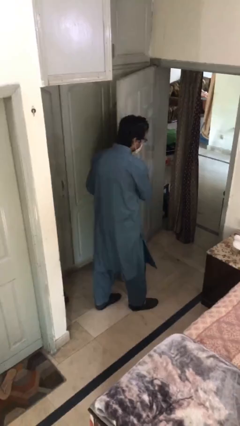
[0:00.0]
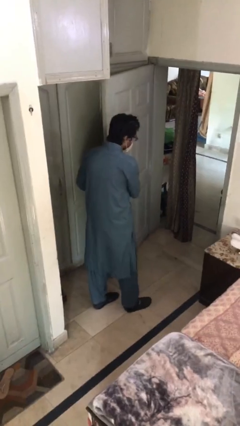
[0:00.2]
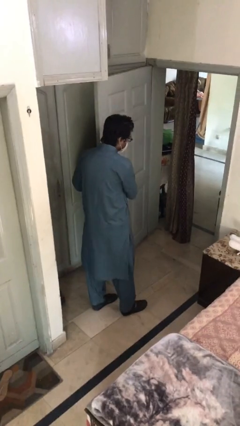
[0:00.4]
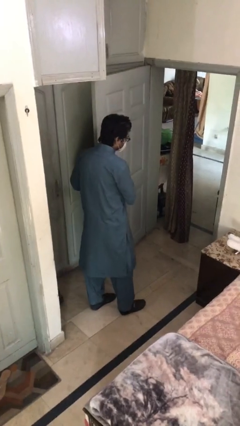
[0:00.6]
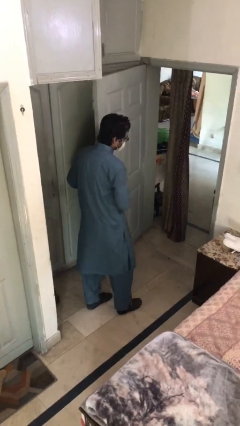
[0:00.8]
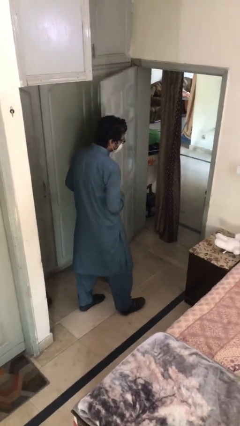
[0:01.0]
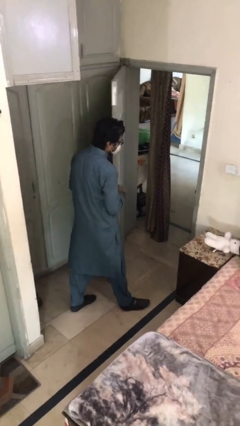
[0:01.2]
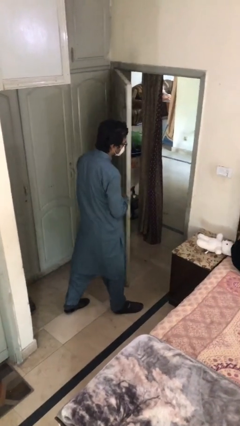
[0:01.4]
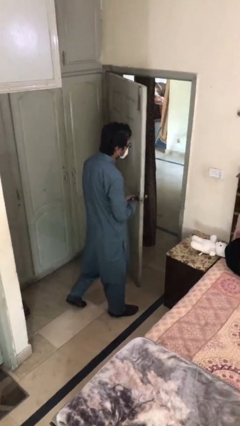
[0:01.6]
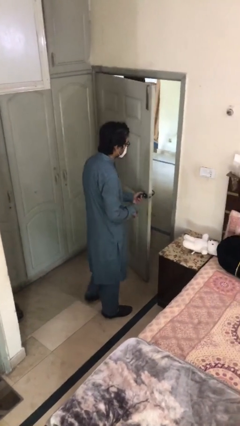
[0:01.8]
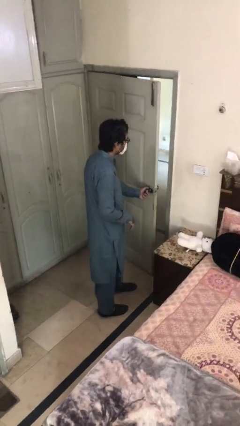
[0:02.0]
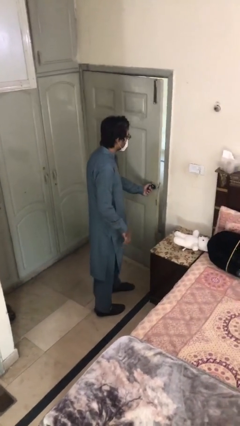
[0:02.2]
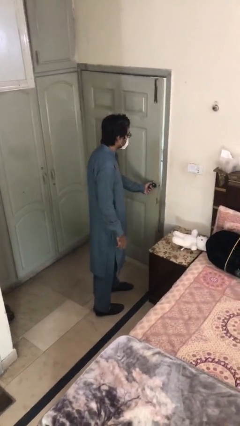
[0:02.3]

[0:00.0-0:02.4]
person closes facility door

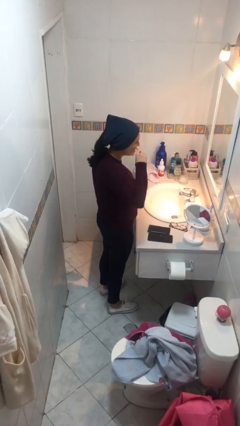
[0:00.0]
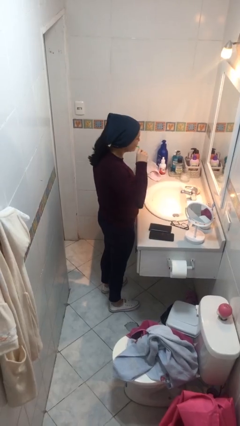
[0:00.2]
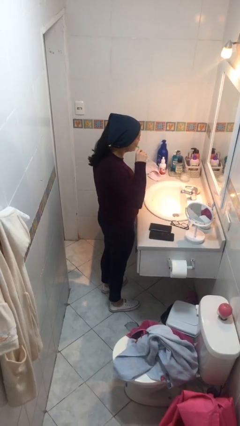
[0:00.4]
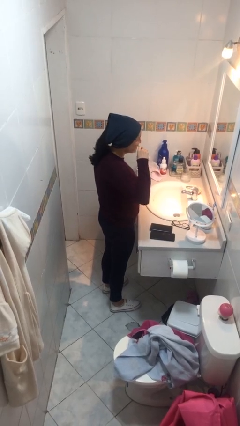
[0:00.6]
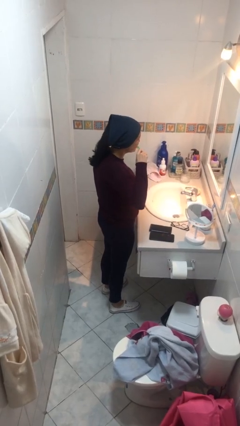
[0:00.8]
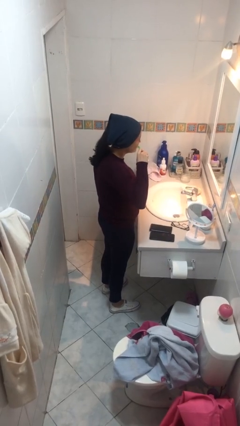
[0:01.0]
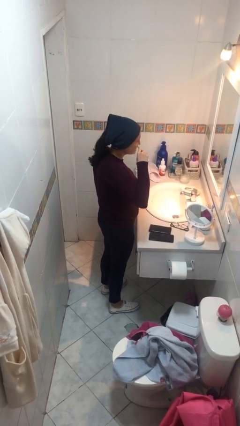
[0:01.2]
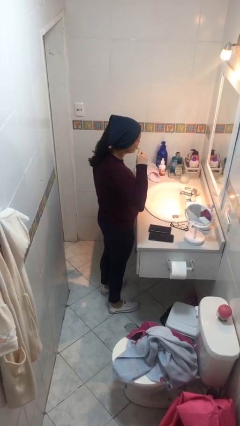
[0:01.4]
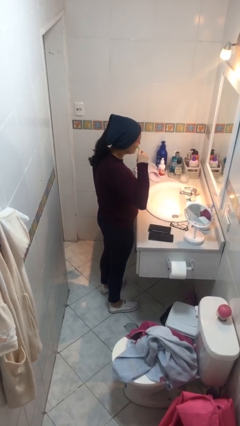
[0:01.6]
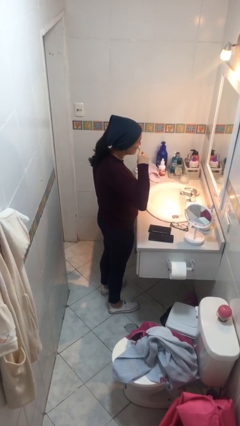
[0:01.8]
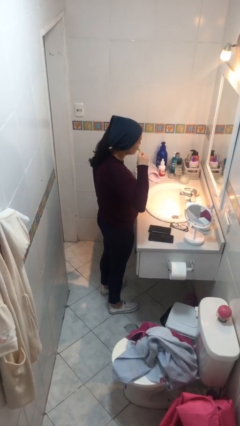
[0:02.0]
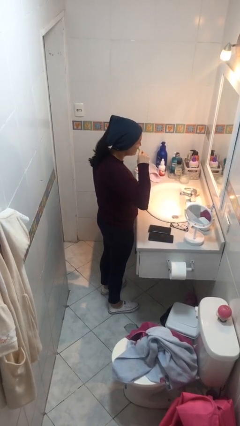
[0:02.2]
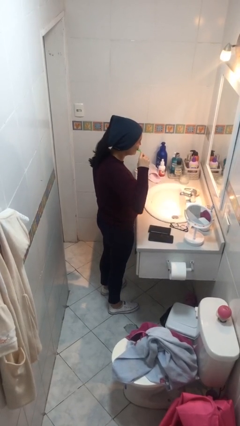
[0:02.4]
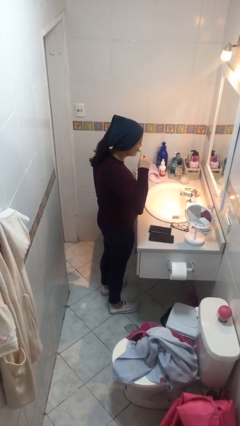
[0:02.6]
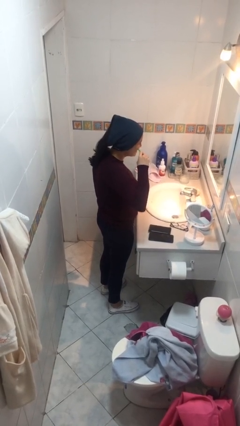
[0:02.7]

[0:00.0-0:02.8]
person brushes teeth

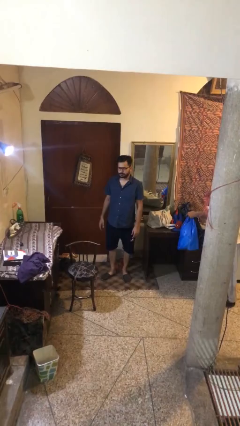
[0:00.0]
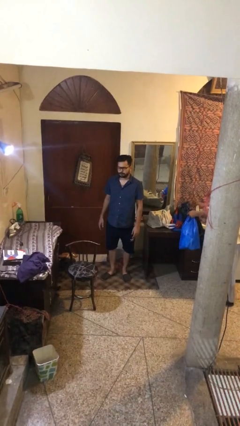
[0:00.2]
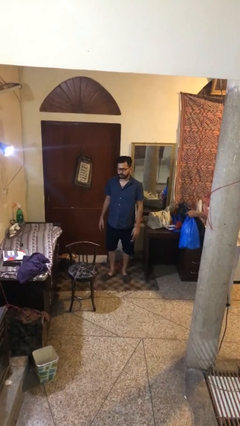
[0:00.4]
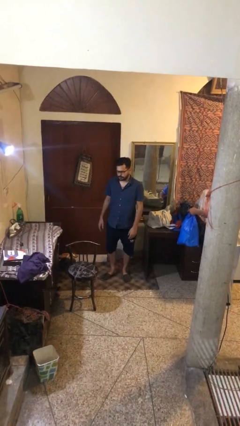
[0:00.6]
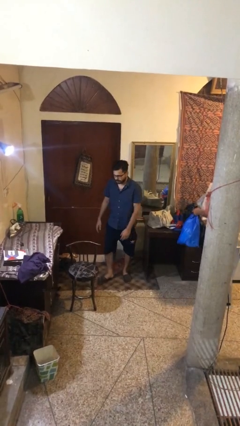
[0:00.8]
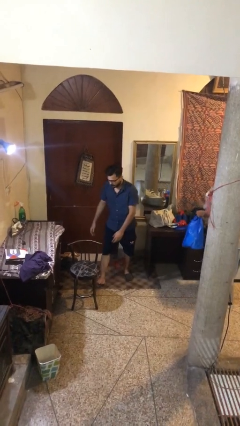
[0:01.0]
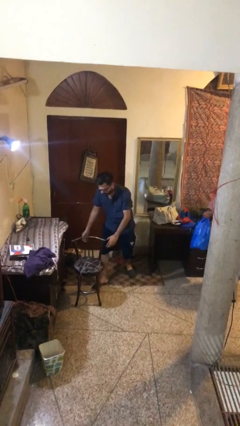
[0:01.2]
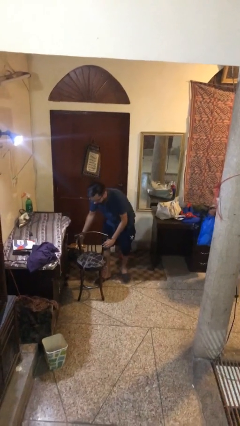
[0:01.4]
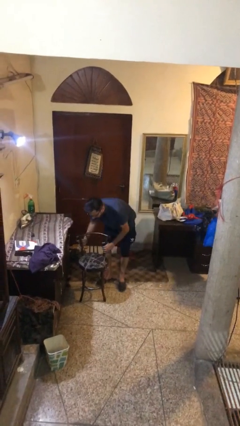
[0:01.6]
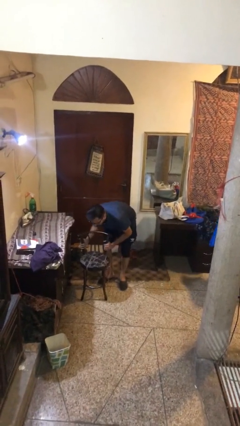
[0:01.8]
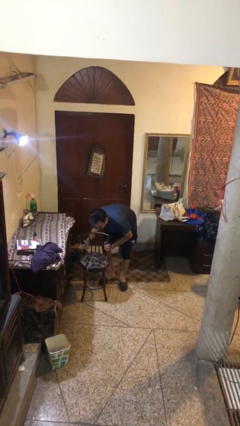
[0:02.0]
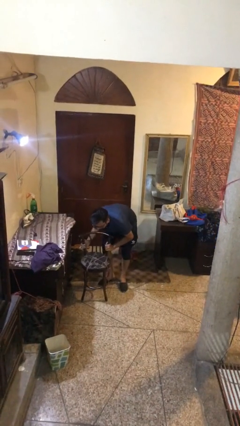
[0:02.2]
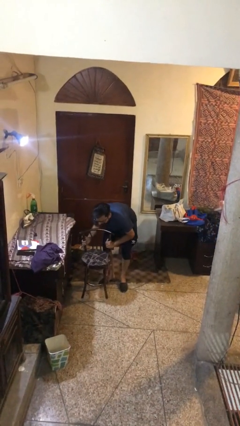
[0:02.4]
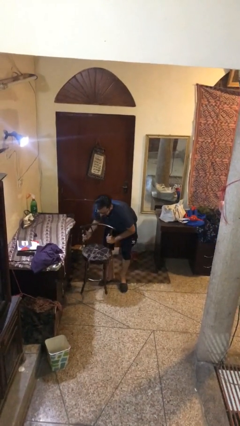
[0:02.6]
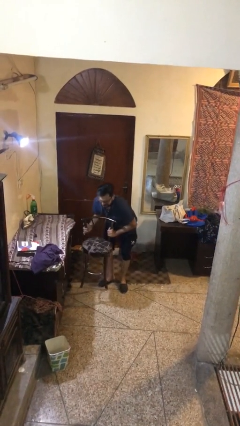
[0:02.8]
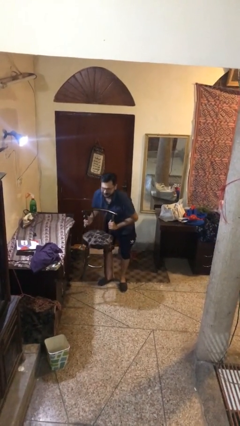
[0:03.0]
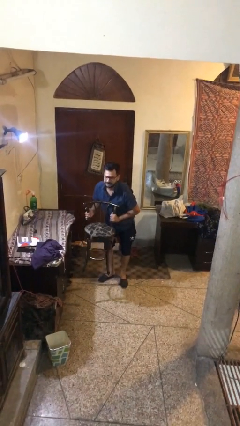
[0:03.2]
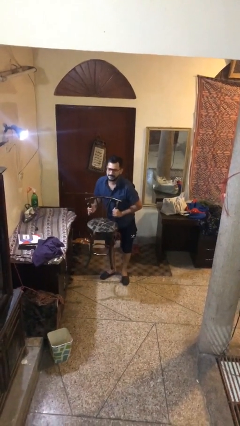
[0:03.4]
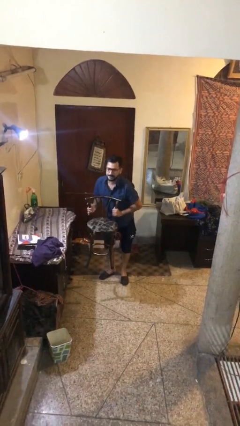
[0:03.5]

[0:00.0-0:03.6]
person picks up object from floor

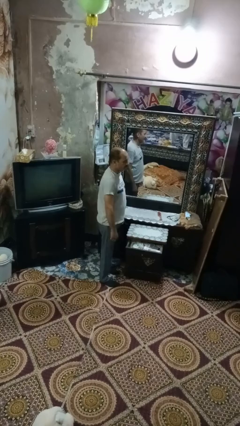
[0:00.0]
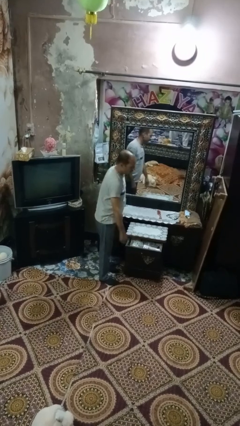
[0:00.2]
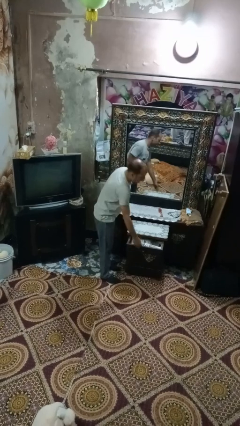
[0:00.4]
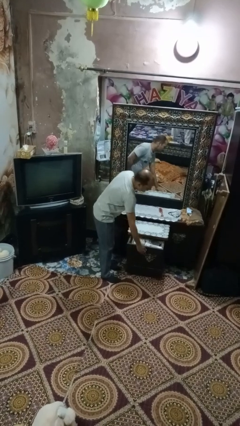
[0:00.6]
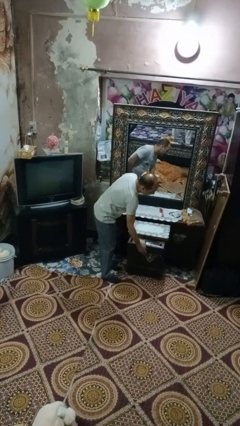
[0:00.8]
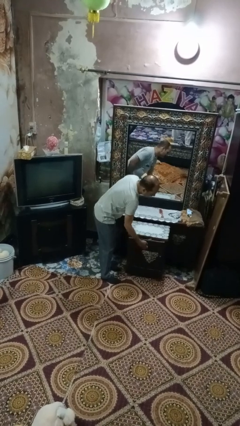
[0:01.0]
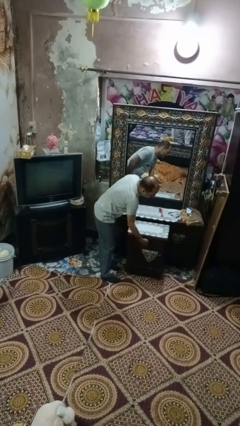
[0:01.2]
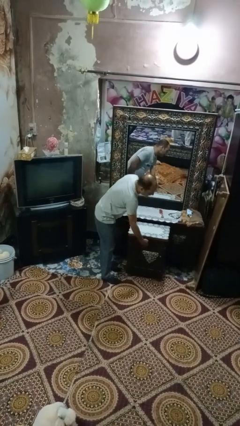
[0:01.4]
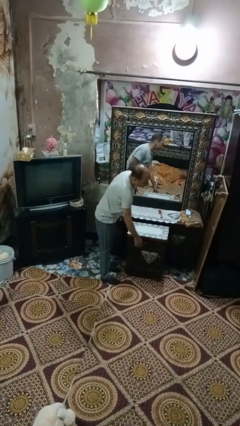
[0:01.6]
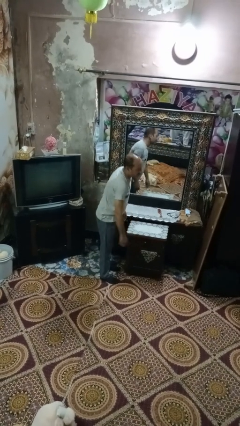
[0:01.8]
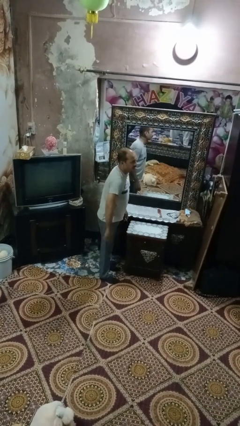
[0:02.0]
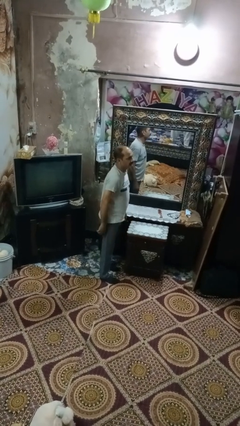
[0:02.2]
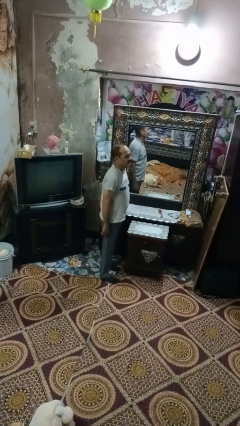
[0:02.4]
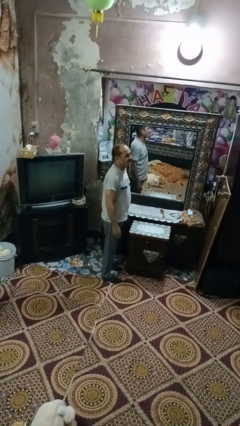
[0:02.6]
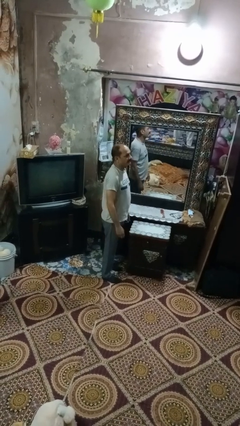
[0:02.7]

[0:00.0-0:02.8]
person closes dresser drawer

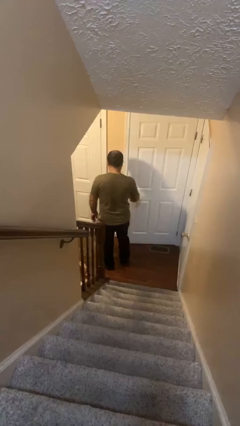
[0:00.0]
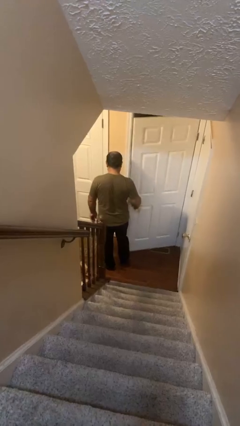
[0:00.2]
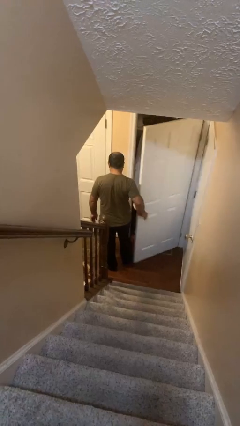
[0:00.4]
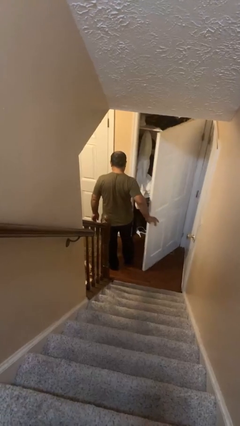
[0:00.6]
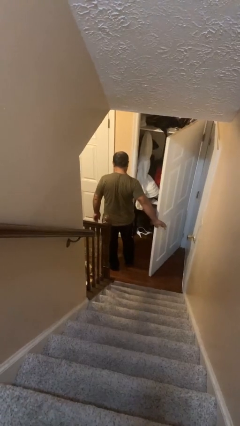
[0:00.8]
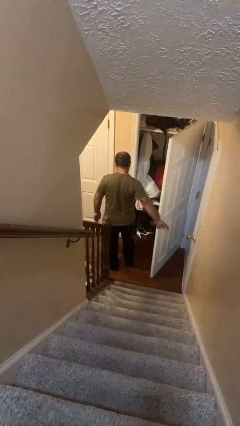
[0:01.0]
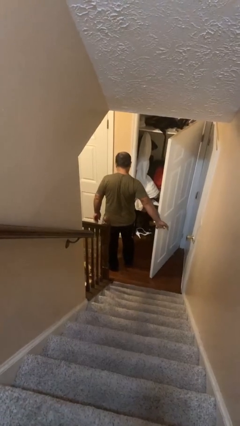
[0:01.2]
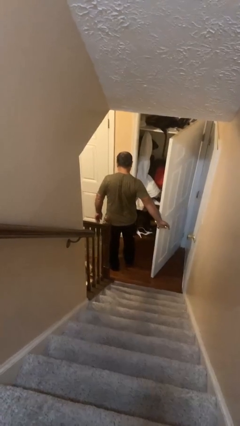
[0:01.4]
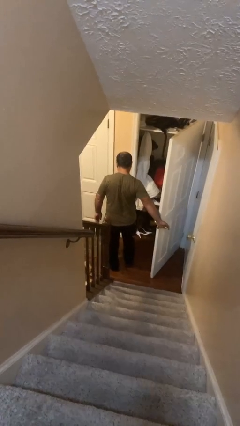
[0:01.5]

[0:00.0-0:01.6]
person opens facility door

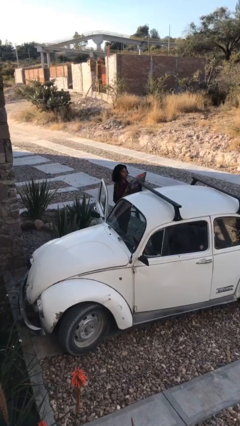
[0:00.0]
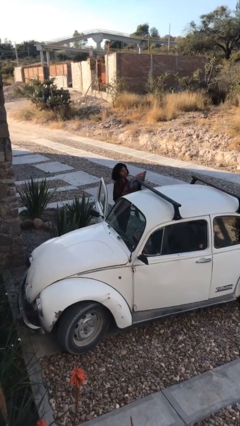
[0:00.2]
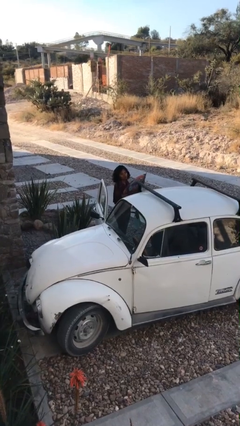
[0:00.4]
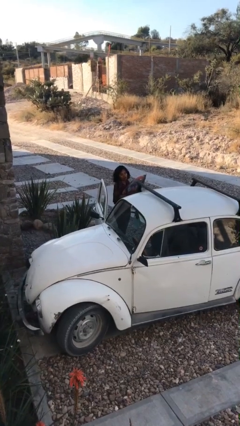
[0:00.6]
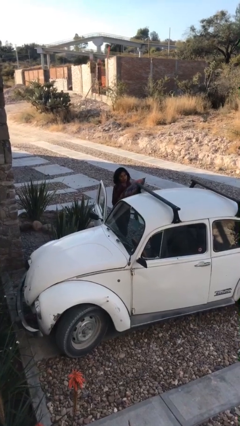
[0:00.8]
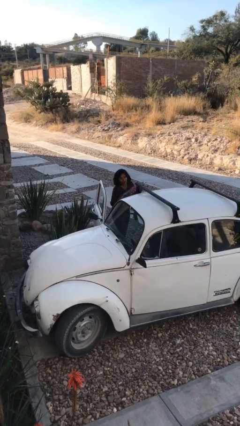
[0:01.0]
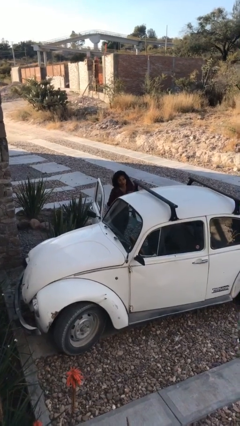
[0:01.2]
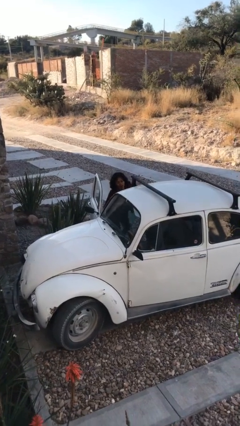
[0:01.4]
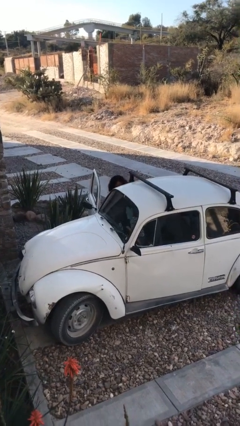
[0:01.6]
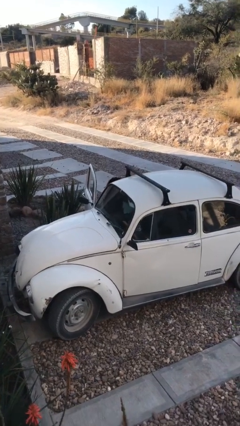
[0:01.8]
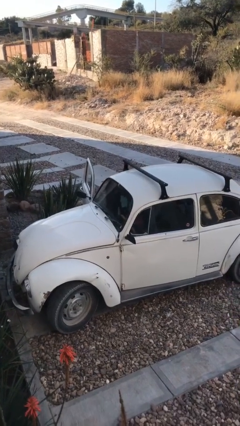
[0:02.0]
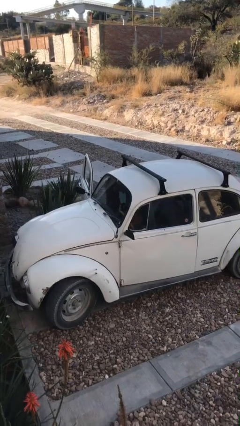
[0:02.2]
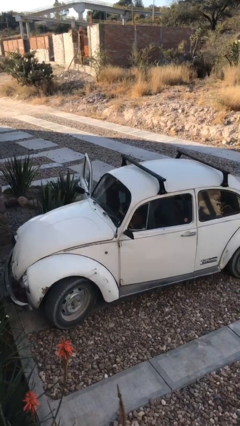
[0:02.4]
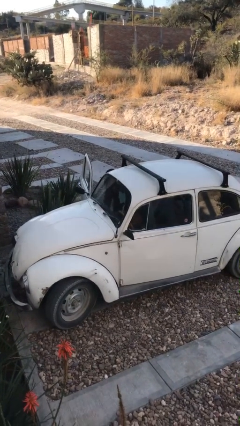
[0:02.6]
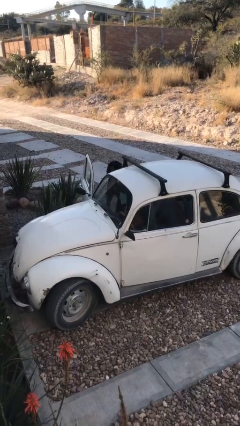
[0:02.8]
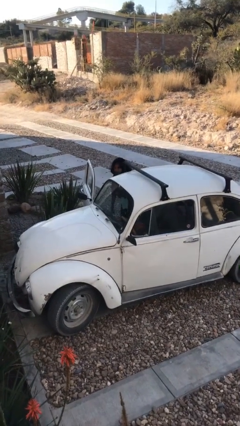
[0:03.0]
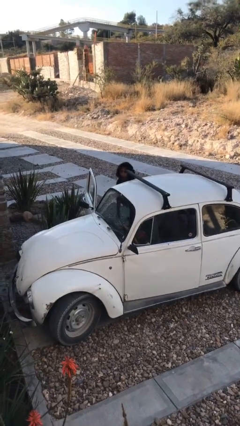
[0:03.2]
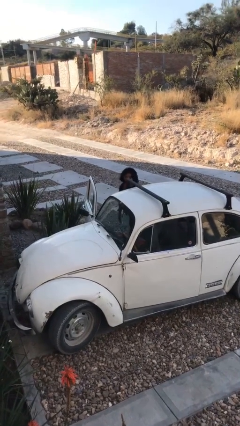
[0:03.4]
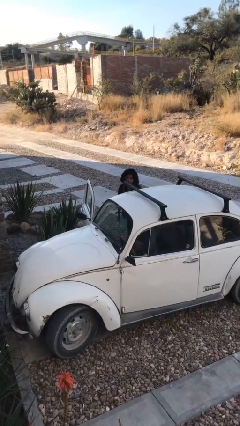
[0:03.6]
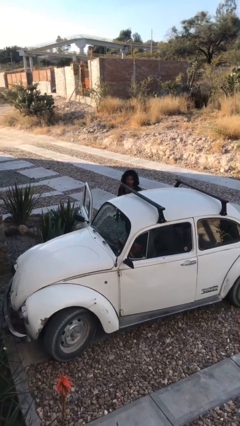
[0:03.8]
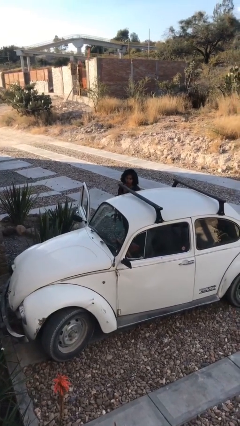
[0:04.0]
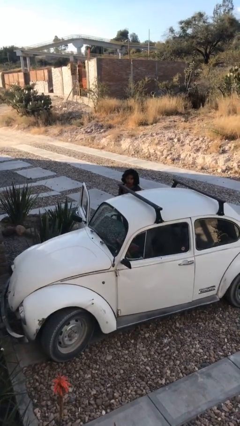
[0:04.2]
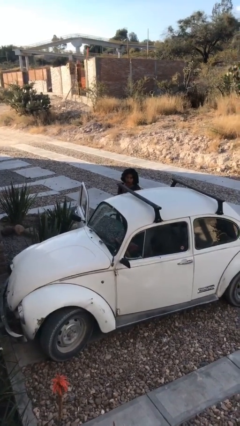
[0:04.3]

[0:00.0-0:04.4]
person loads car
